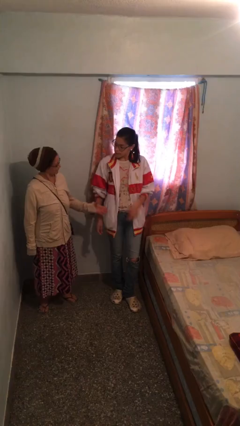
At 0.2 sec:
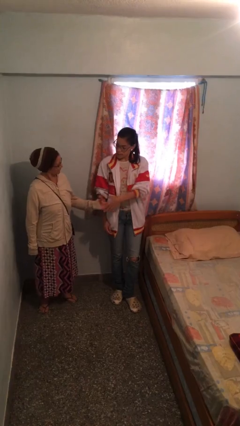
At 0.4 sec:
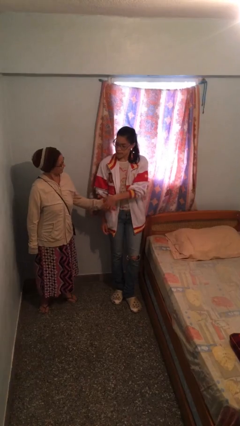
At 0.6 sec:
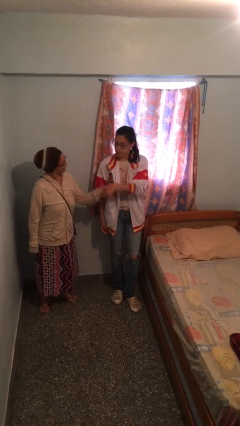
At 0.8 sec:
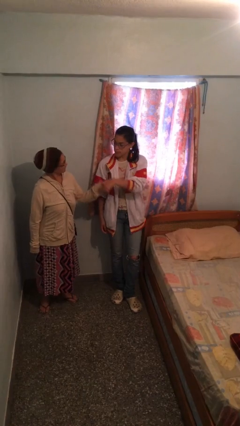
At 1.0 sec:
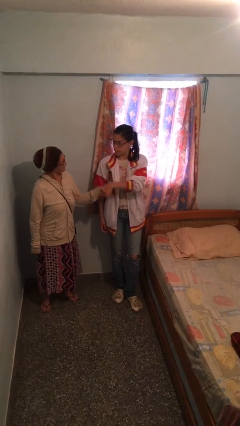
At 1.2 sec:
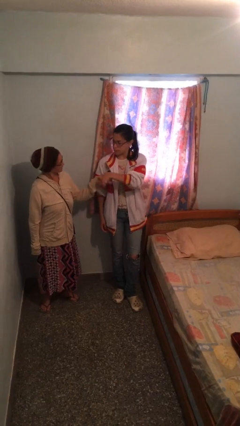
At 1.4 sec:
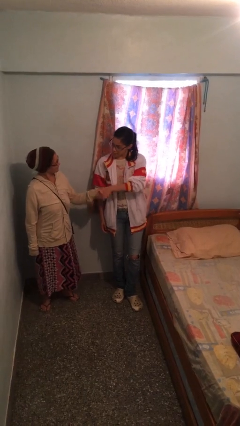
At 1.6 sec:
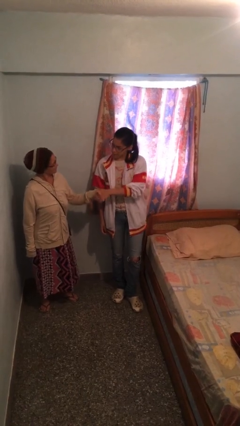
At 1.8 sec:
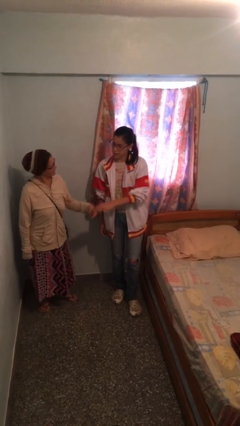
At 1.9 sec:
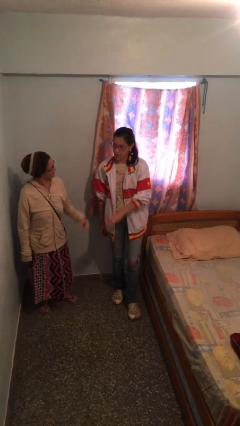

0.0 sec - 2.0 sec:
person shakes hand

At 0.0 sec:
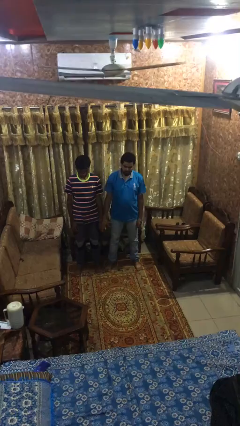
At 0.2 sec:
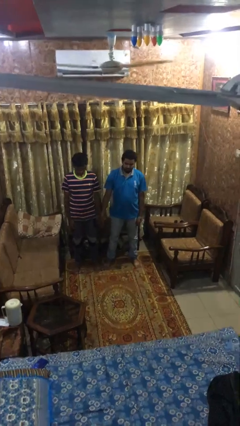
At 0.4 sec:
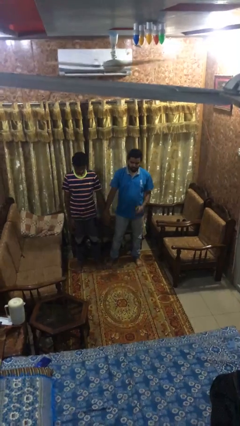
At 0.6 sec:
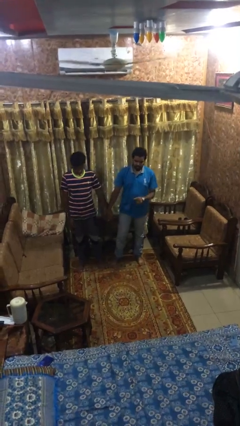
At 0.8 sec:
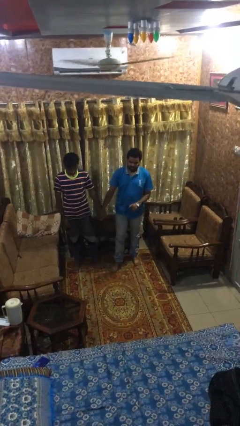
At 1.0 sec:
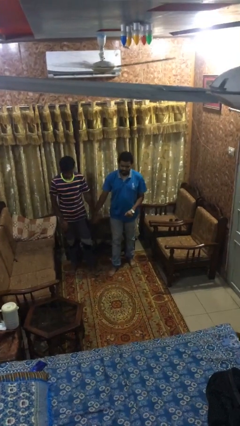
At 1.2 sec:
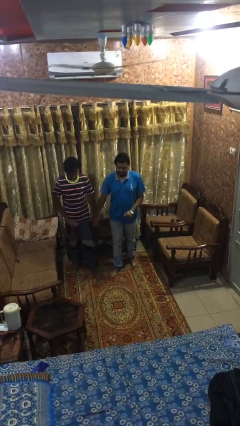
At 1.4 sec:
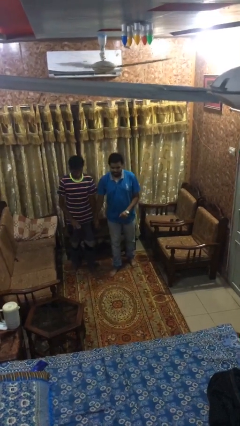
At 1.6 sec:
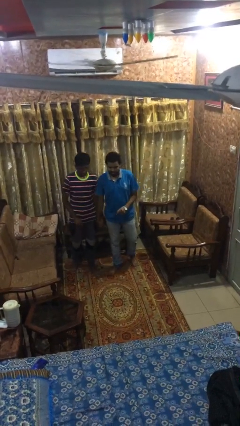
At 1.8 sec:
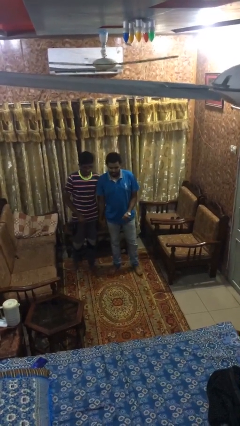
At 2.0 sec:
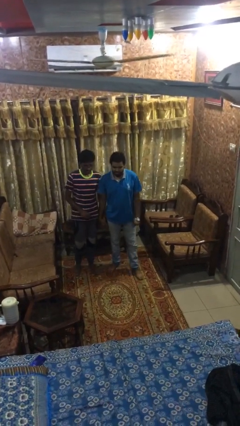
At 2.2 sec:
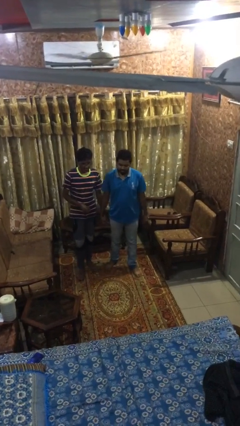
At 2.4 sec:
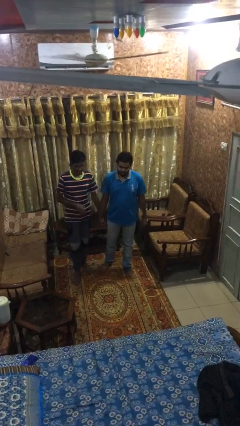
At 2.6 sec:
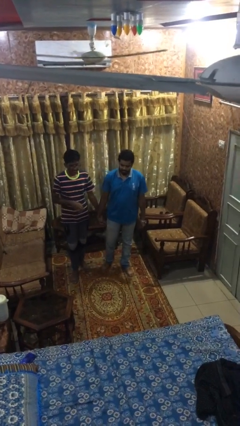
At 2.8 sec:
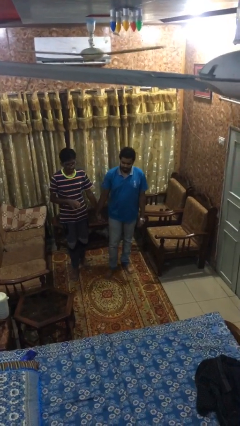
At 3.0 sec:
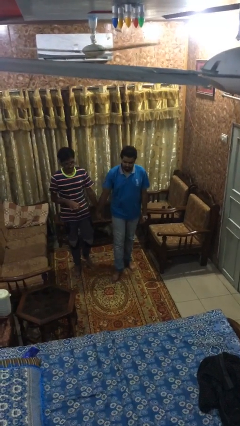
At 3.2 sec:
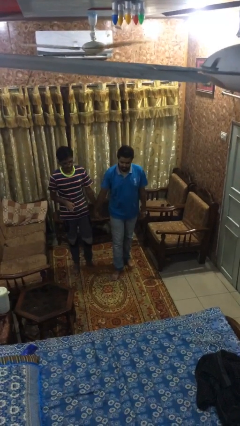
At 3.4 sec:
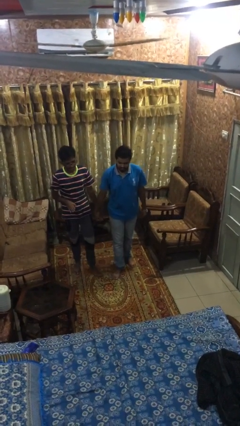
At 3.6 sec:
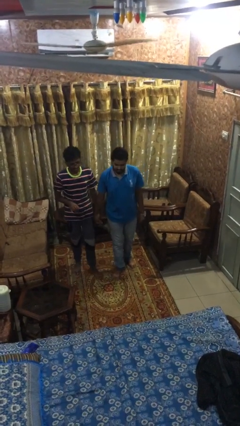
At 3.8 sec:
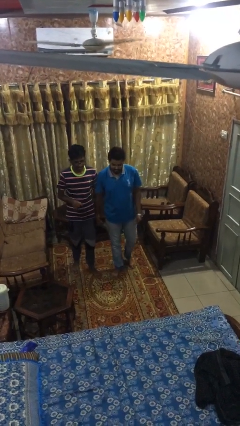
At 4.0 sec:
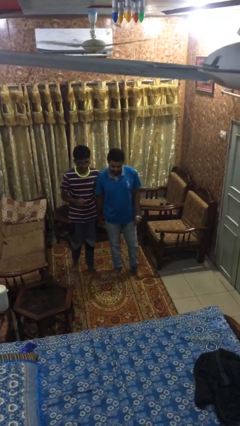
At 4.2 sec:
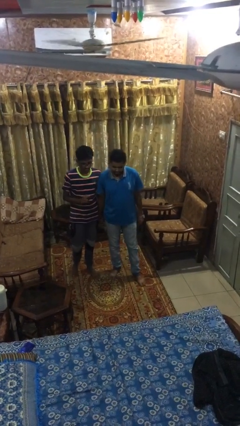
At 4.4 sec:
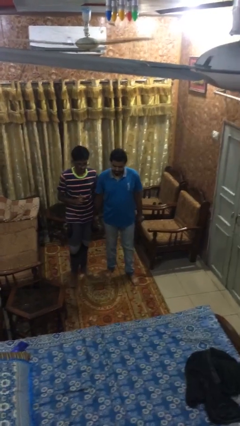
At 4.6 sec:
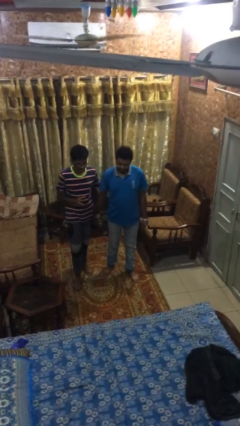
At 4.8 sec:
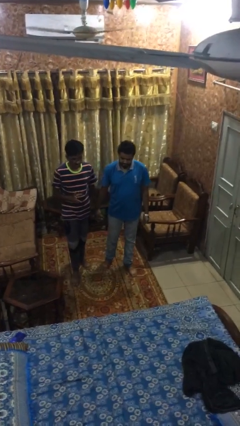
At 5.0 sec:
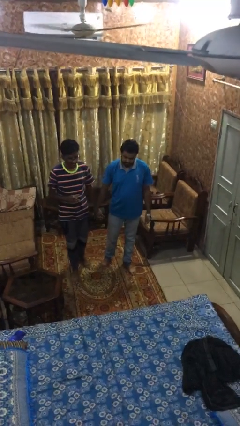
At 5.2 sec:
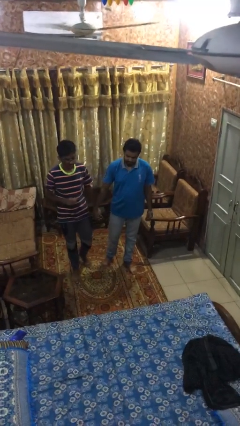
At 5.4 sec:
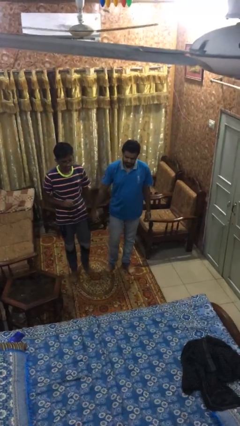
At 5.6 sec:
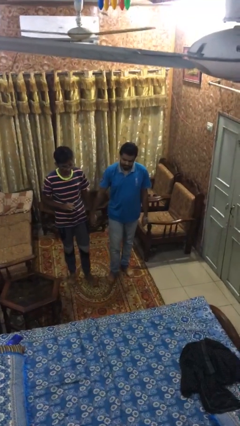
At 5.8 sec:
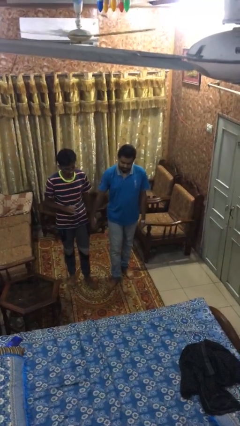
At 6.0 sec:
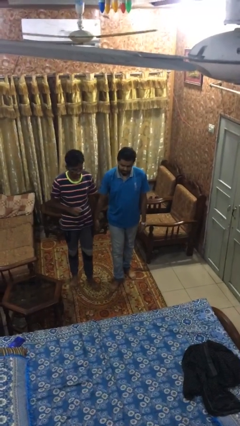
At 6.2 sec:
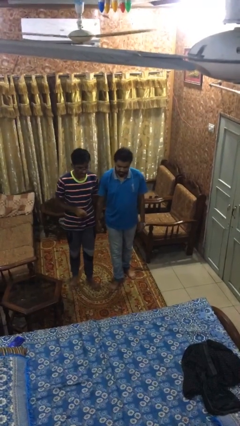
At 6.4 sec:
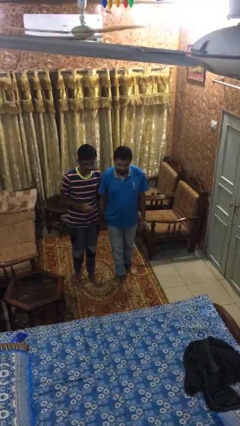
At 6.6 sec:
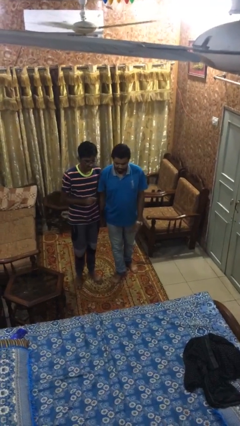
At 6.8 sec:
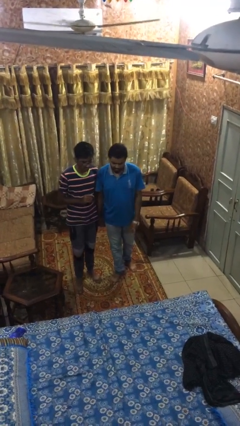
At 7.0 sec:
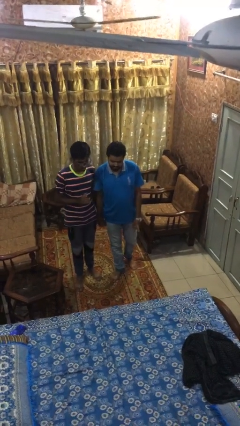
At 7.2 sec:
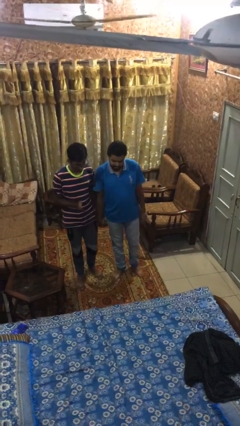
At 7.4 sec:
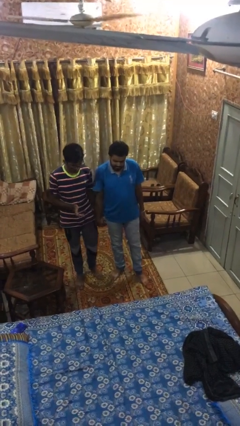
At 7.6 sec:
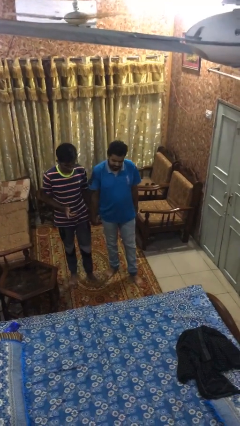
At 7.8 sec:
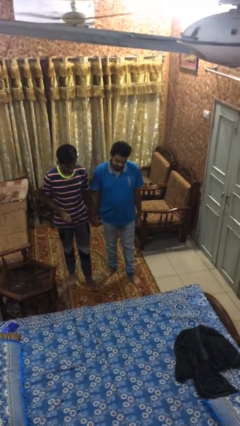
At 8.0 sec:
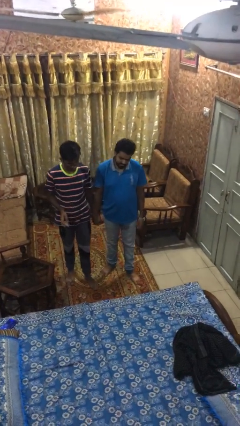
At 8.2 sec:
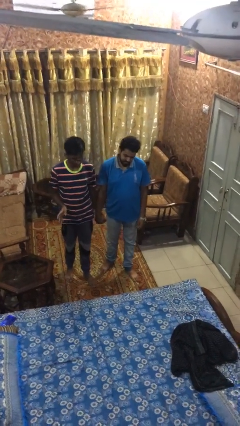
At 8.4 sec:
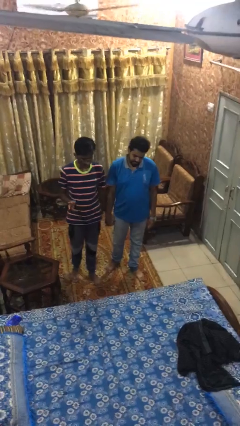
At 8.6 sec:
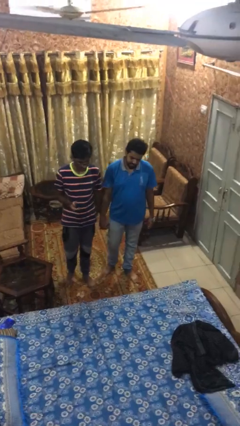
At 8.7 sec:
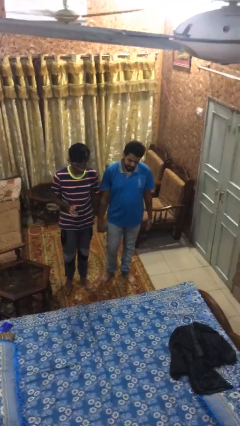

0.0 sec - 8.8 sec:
person holds hand
